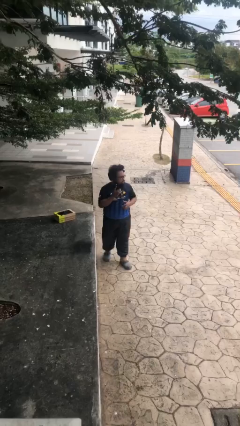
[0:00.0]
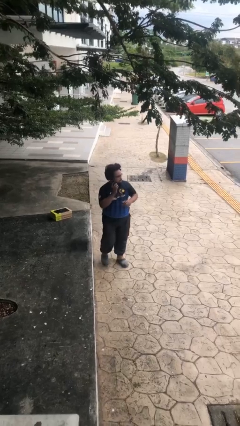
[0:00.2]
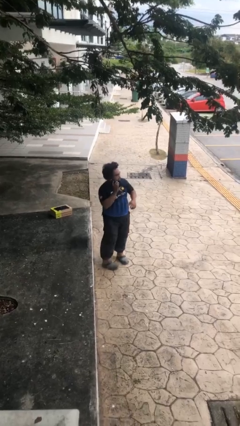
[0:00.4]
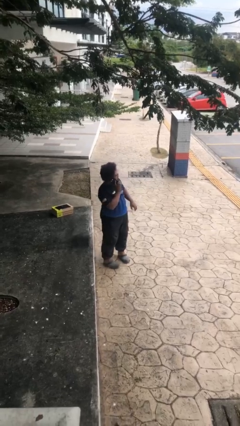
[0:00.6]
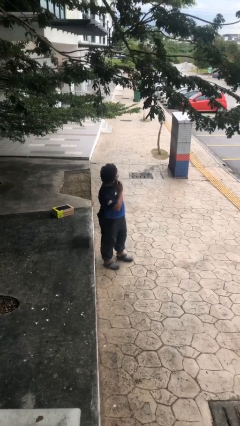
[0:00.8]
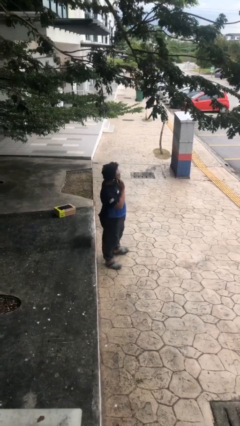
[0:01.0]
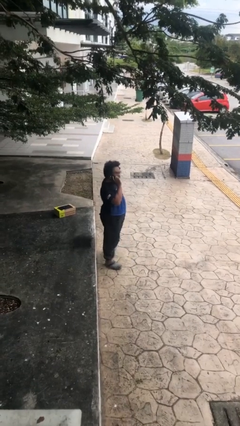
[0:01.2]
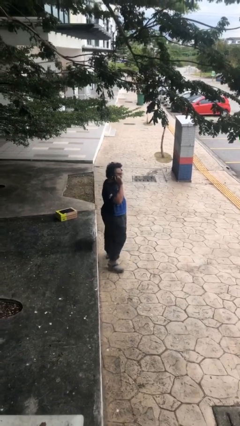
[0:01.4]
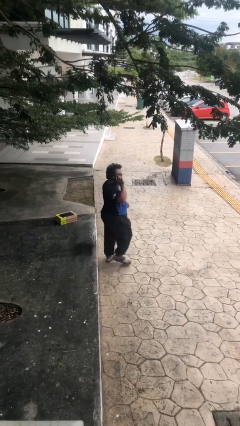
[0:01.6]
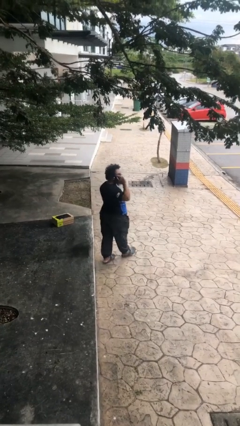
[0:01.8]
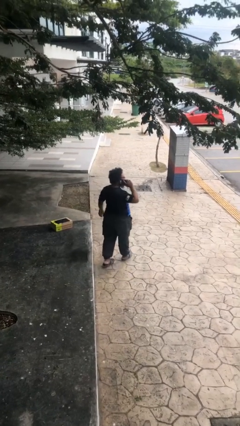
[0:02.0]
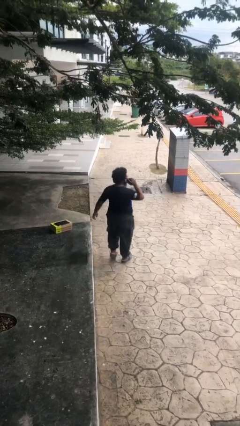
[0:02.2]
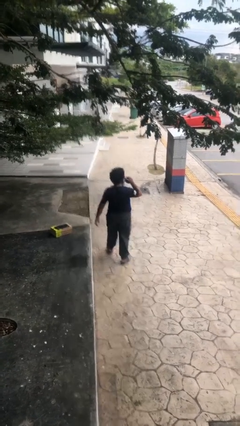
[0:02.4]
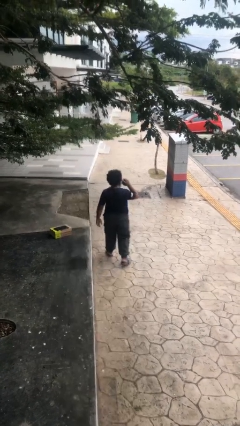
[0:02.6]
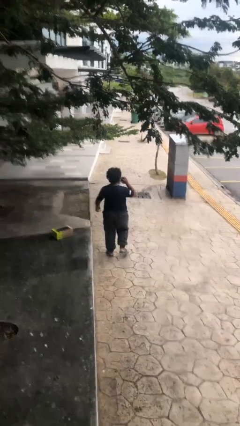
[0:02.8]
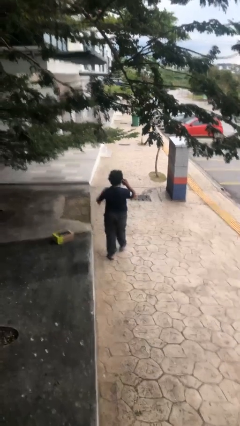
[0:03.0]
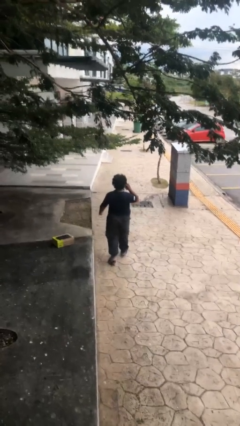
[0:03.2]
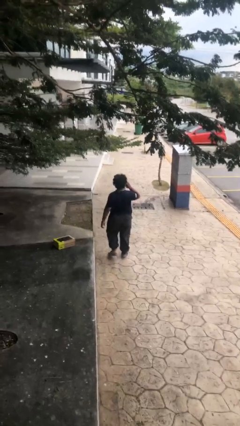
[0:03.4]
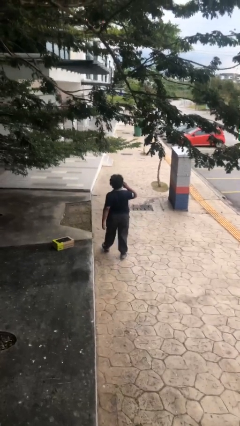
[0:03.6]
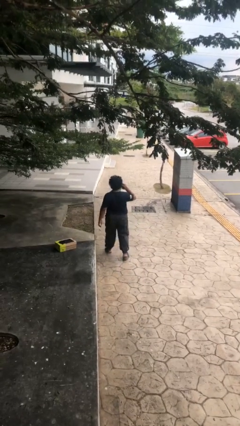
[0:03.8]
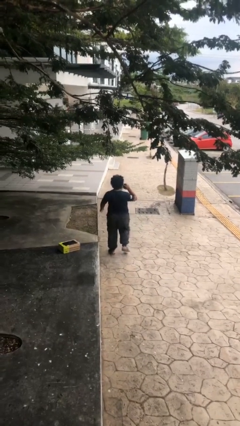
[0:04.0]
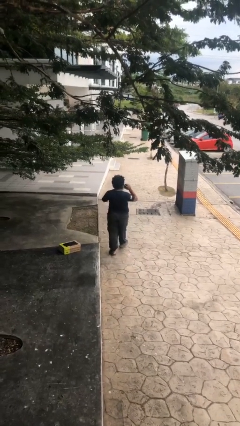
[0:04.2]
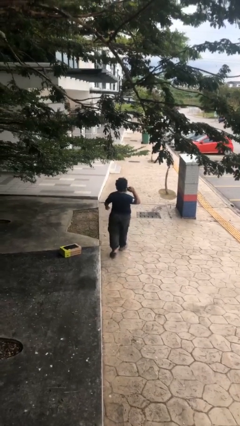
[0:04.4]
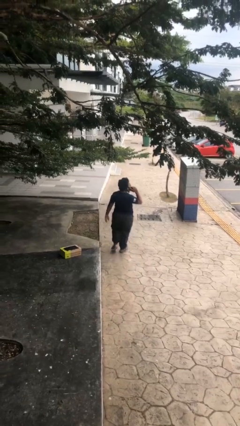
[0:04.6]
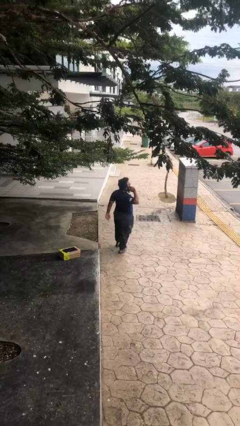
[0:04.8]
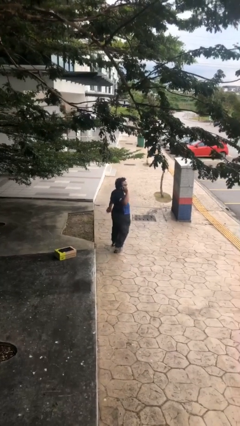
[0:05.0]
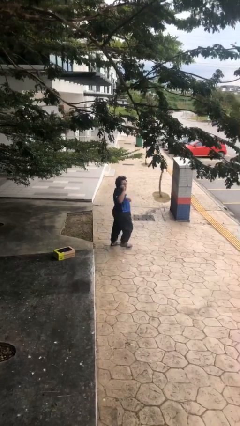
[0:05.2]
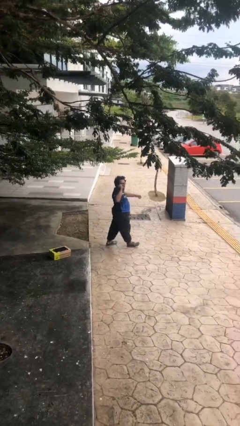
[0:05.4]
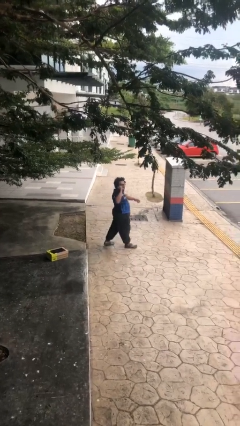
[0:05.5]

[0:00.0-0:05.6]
person talks on phone

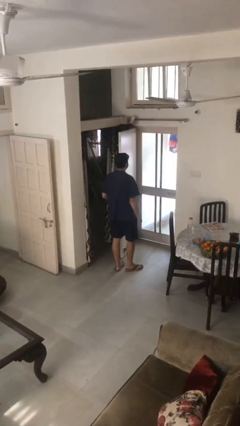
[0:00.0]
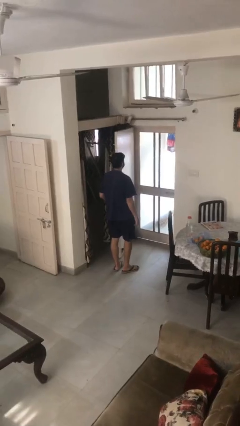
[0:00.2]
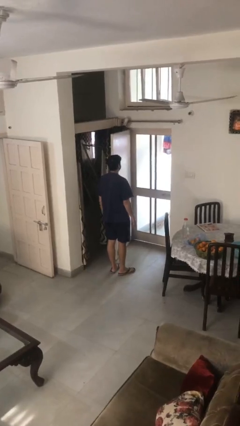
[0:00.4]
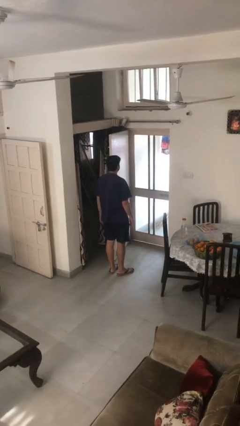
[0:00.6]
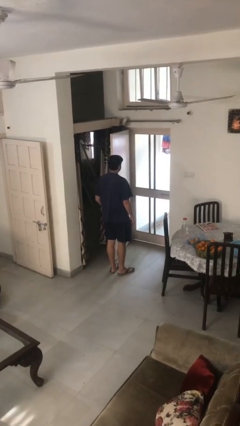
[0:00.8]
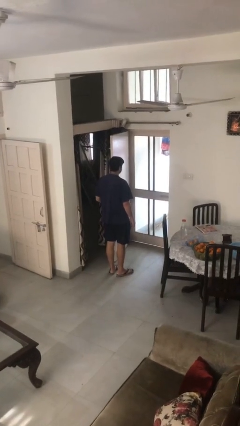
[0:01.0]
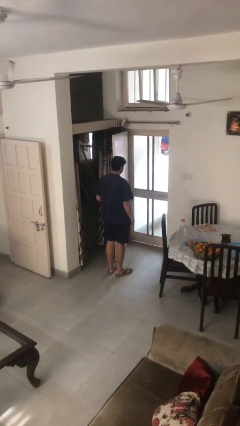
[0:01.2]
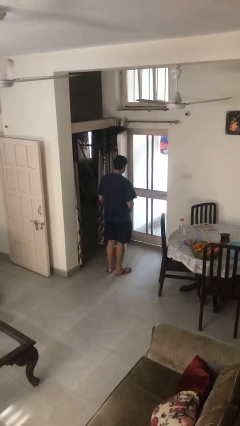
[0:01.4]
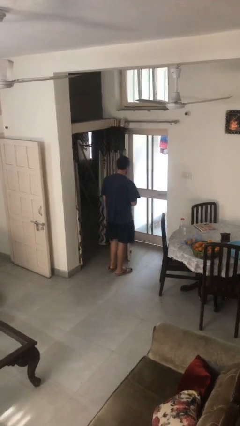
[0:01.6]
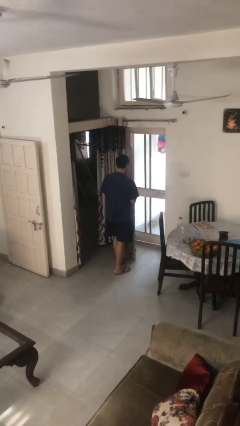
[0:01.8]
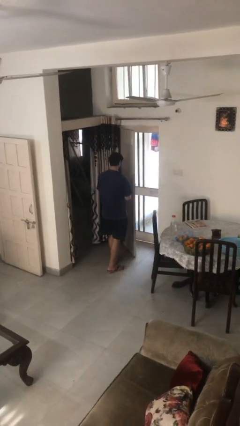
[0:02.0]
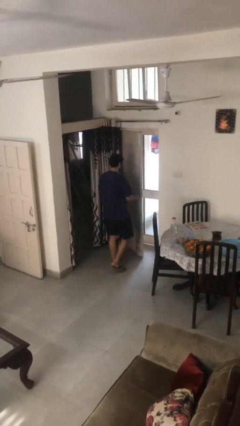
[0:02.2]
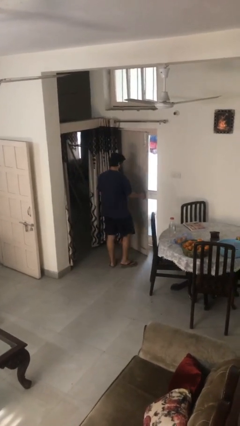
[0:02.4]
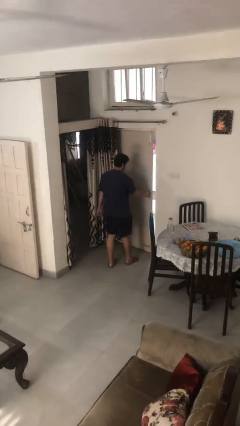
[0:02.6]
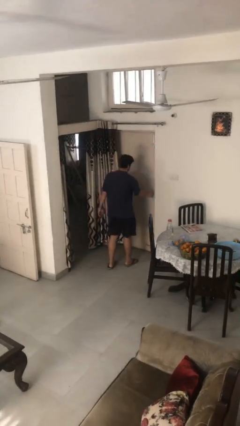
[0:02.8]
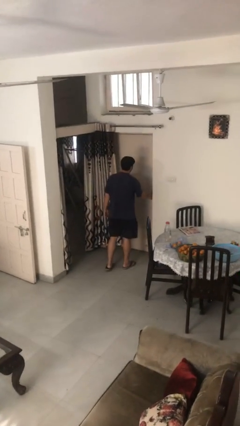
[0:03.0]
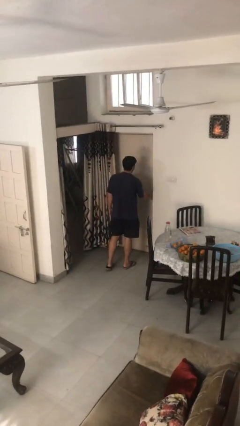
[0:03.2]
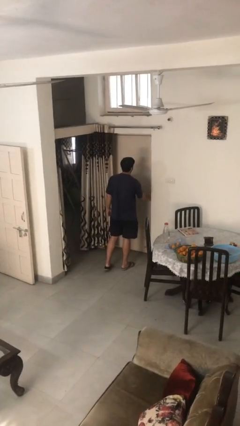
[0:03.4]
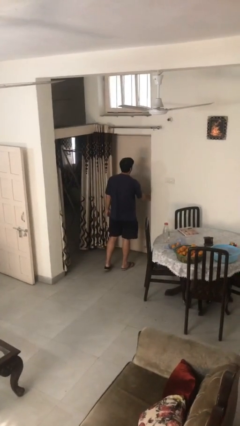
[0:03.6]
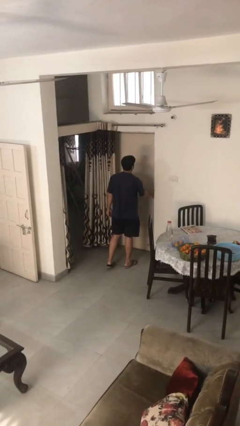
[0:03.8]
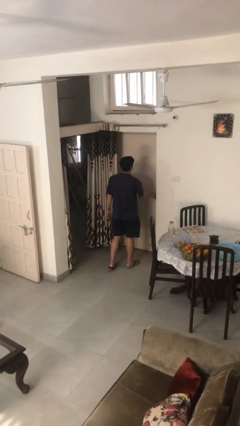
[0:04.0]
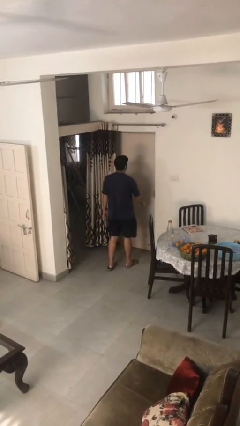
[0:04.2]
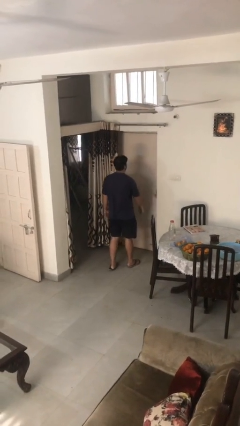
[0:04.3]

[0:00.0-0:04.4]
person closes facility door

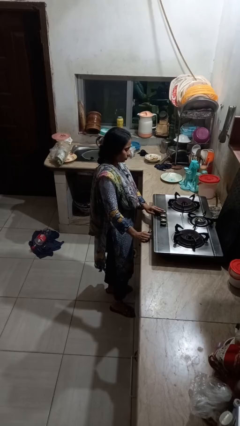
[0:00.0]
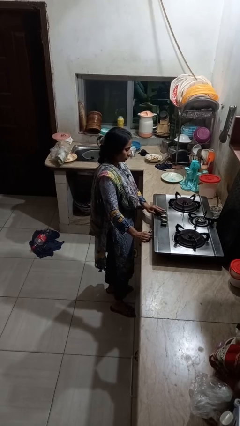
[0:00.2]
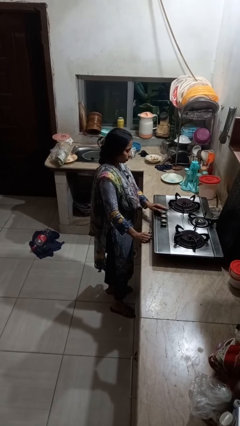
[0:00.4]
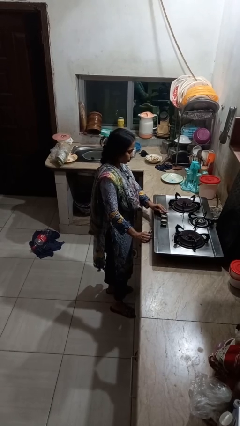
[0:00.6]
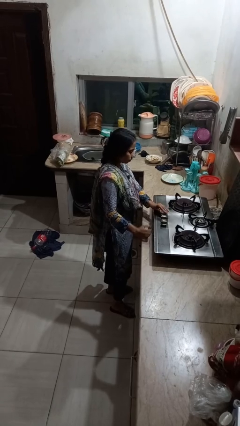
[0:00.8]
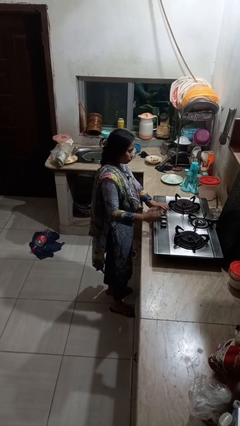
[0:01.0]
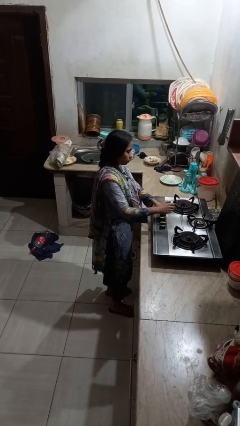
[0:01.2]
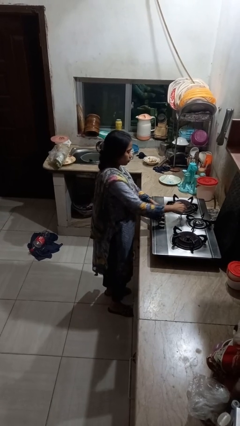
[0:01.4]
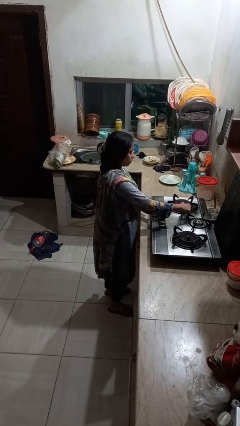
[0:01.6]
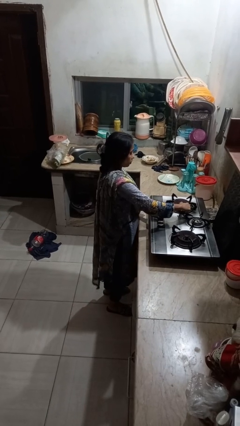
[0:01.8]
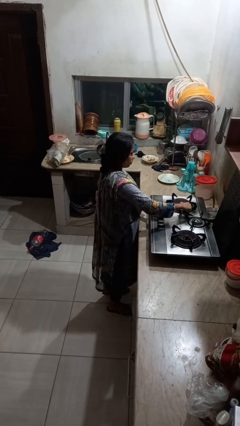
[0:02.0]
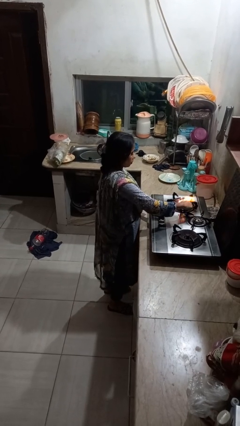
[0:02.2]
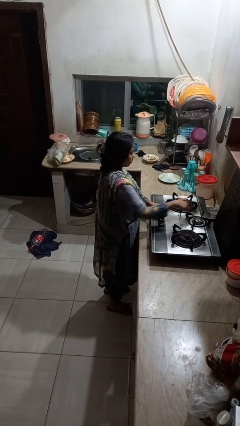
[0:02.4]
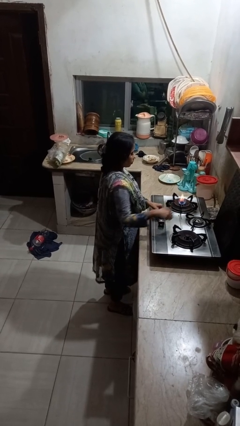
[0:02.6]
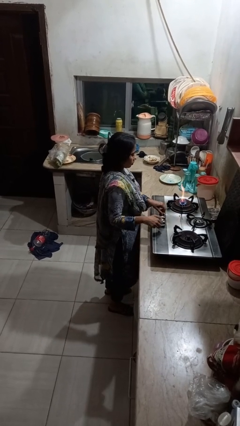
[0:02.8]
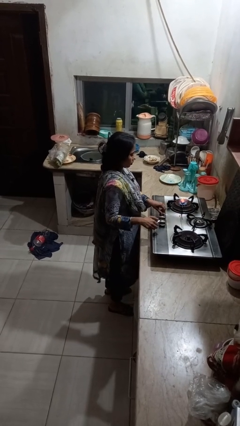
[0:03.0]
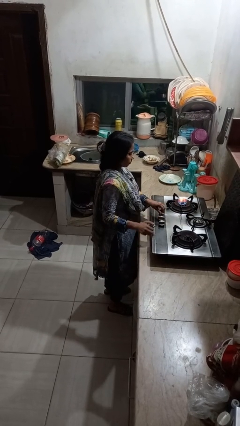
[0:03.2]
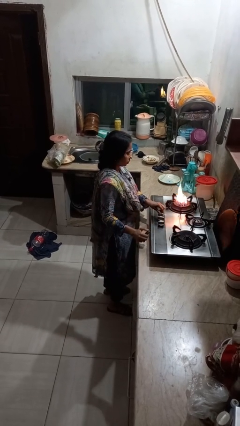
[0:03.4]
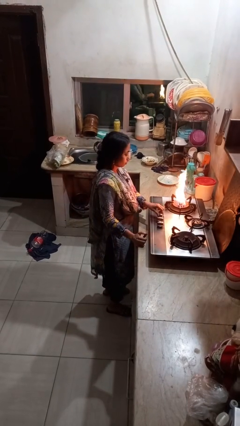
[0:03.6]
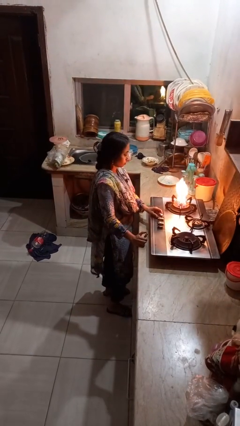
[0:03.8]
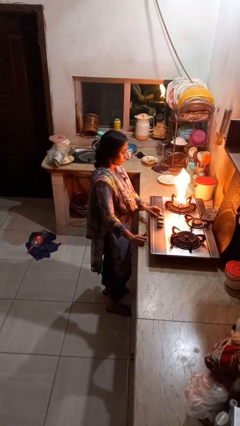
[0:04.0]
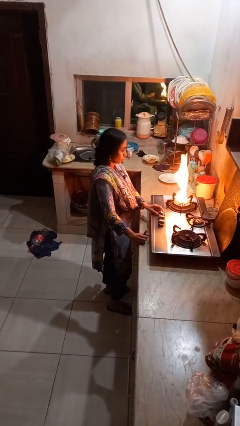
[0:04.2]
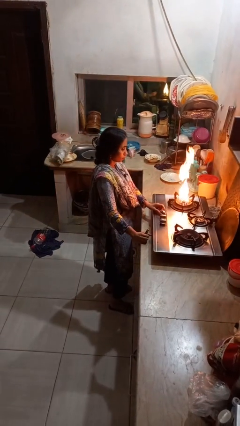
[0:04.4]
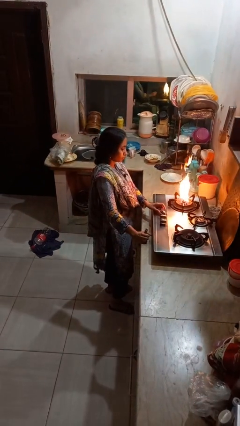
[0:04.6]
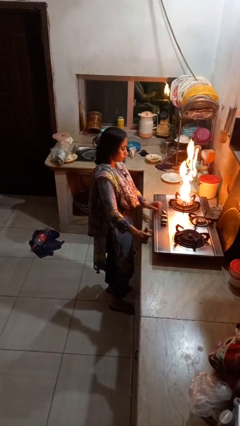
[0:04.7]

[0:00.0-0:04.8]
person turns on stovetop

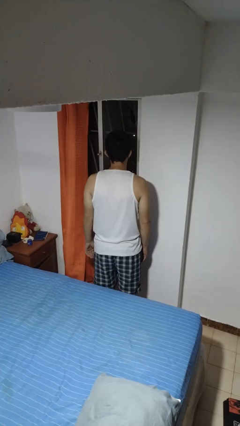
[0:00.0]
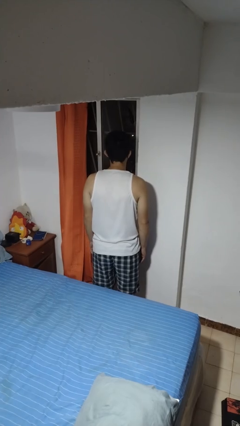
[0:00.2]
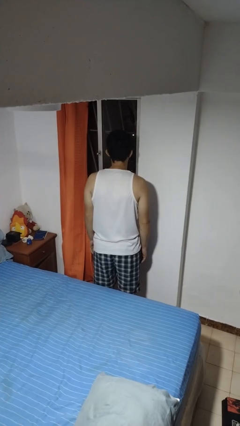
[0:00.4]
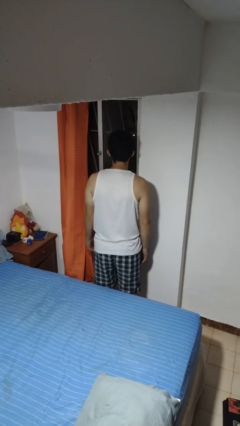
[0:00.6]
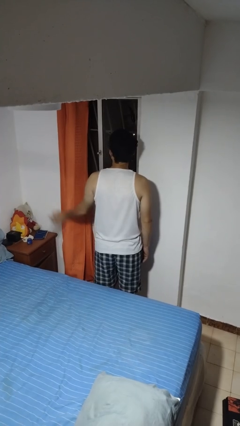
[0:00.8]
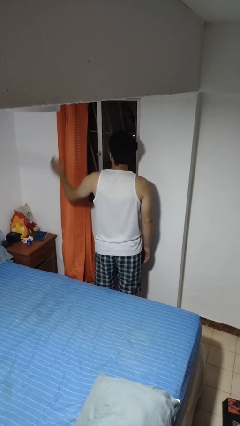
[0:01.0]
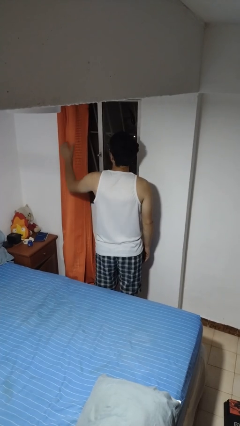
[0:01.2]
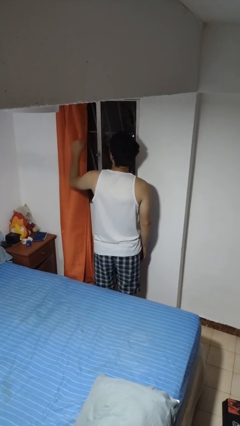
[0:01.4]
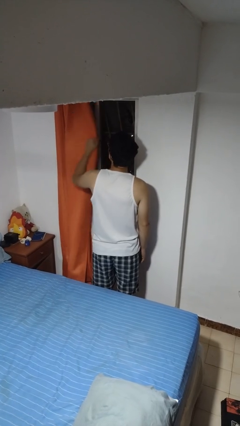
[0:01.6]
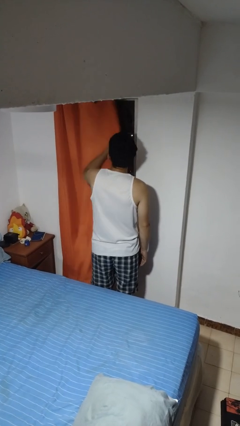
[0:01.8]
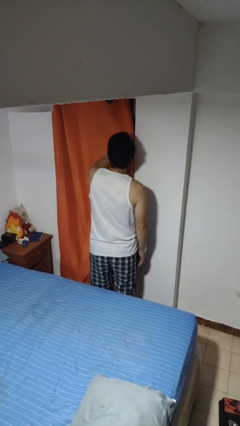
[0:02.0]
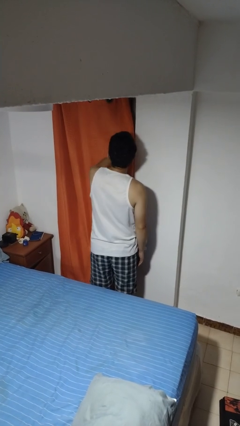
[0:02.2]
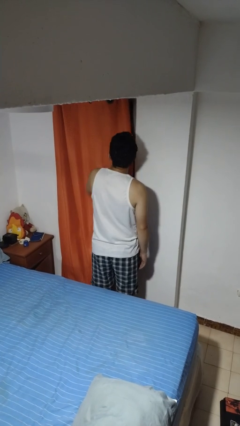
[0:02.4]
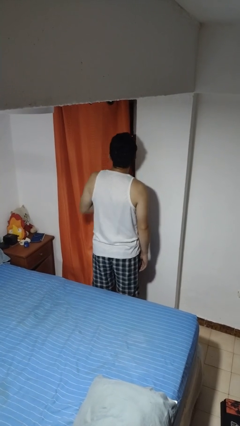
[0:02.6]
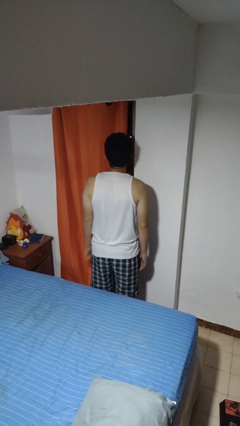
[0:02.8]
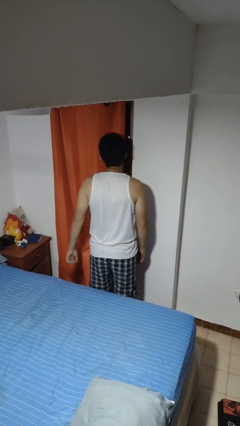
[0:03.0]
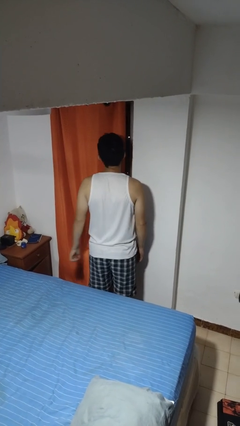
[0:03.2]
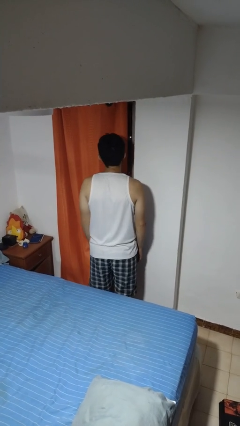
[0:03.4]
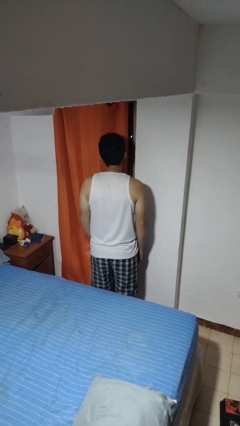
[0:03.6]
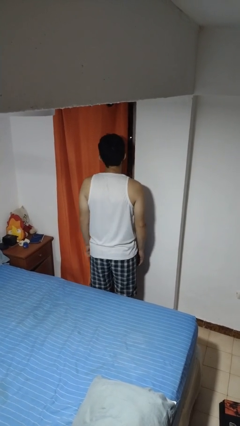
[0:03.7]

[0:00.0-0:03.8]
person closes curtains
